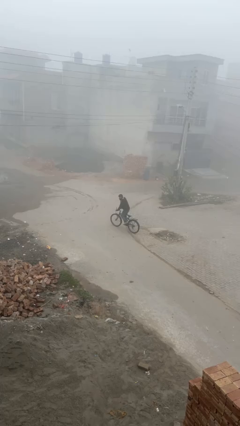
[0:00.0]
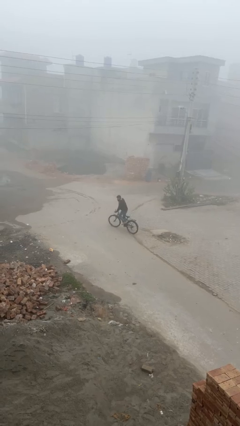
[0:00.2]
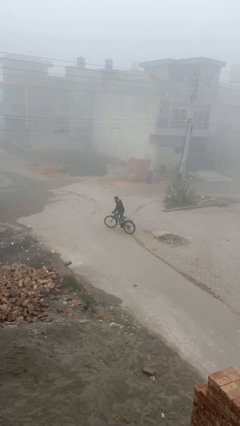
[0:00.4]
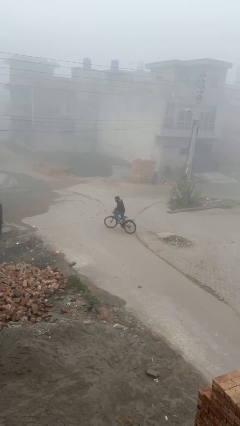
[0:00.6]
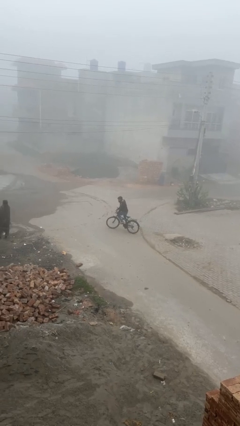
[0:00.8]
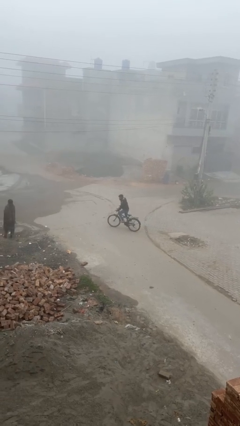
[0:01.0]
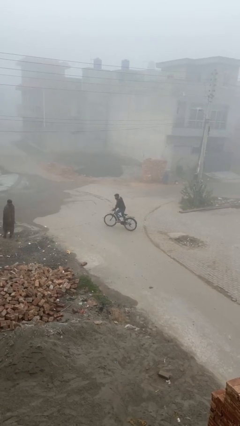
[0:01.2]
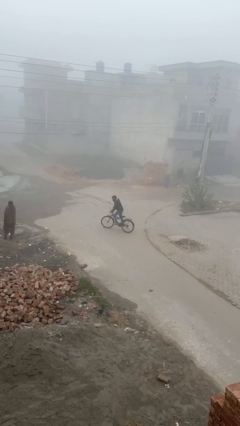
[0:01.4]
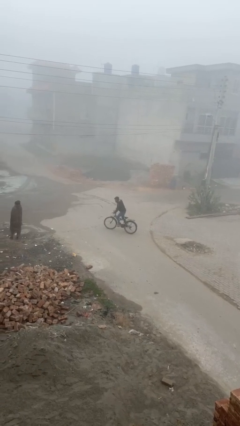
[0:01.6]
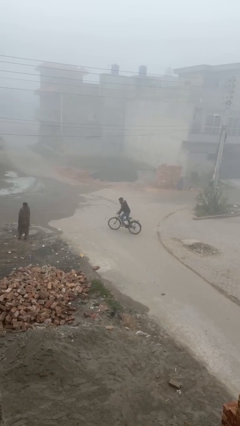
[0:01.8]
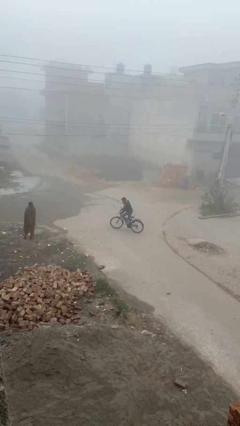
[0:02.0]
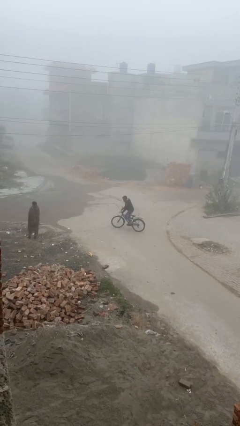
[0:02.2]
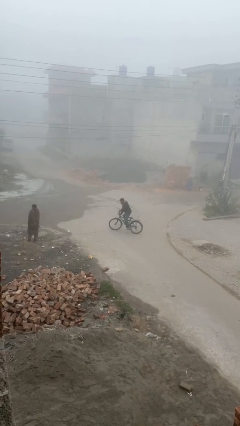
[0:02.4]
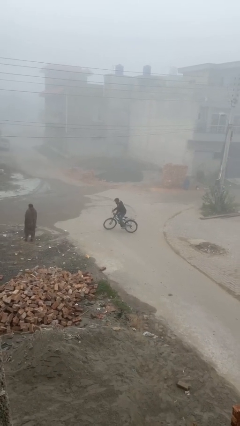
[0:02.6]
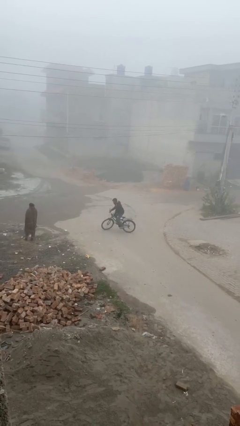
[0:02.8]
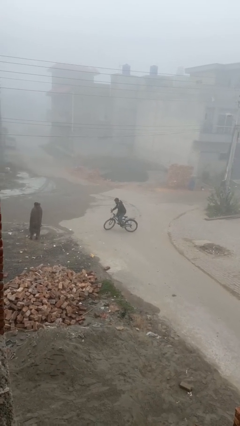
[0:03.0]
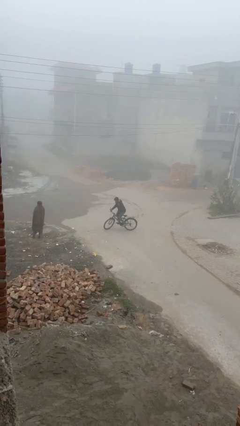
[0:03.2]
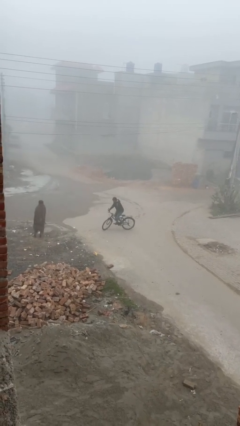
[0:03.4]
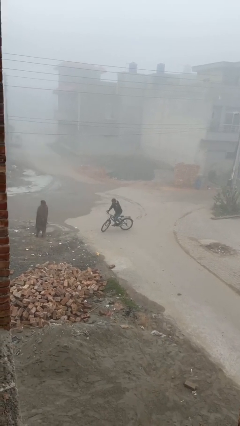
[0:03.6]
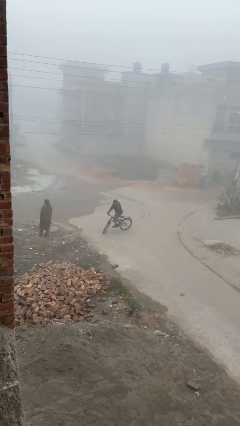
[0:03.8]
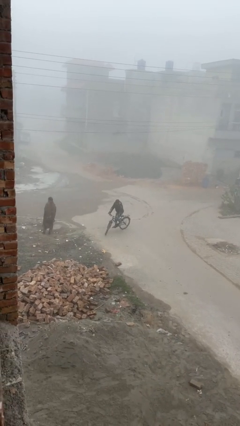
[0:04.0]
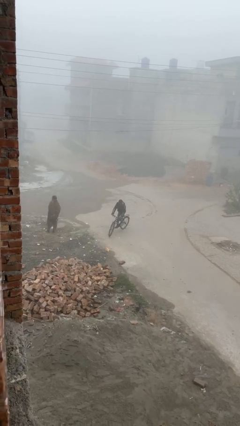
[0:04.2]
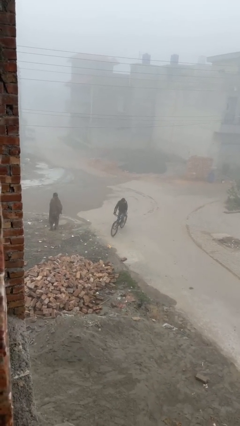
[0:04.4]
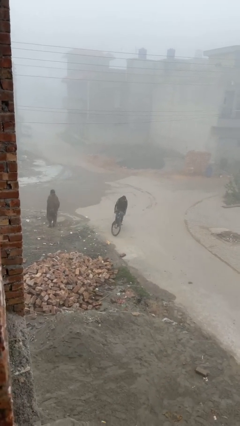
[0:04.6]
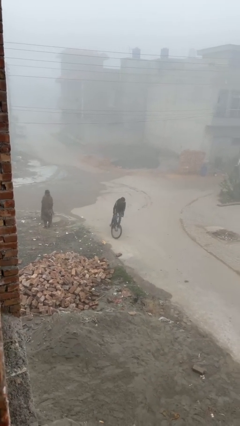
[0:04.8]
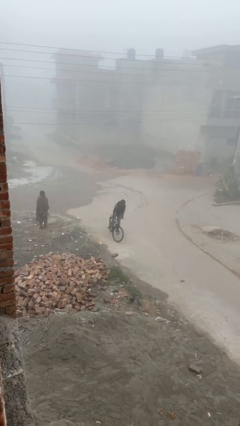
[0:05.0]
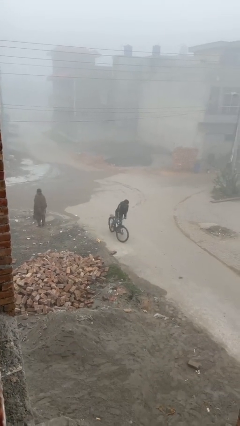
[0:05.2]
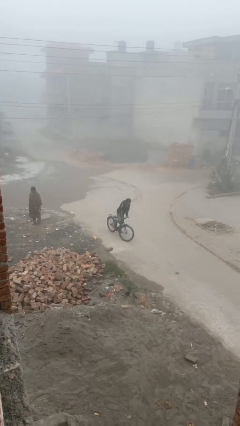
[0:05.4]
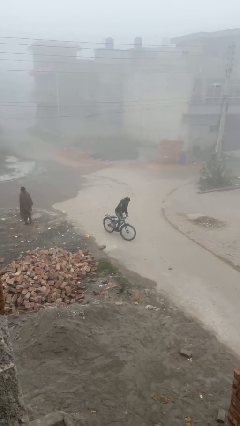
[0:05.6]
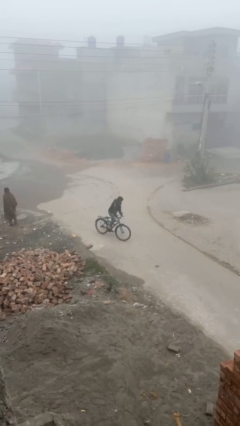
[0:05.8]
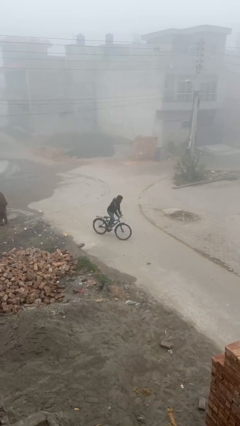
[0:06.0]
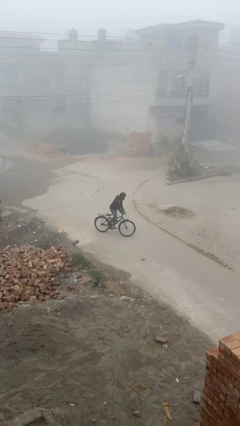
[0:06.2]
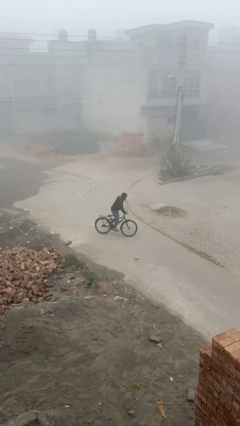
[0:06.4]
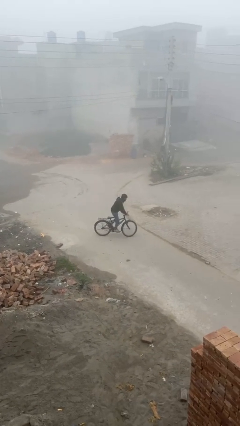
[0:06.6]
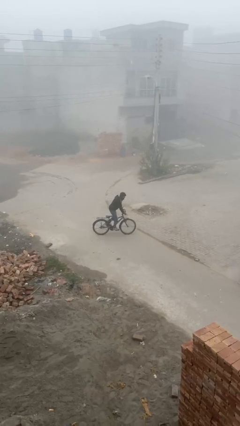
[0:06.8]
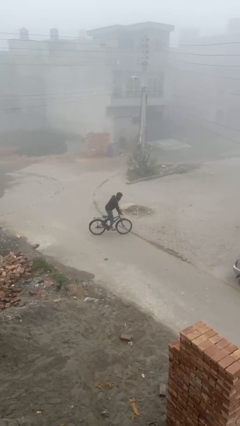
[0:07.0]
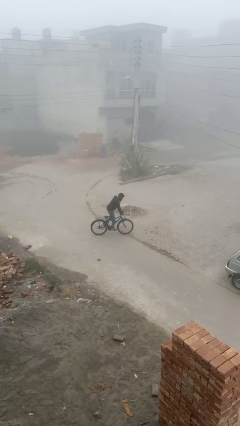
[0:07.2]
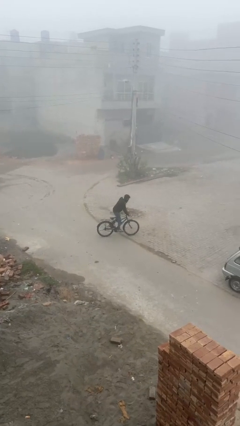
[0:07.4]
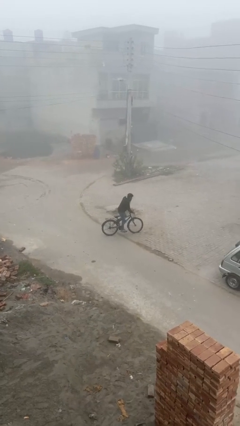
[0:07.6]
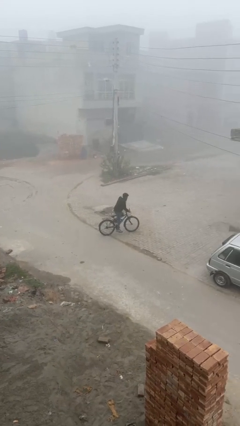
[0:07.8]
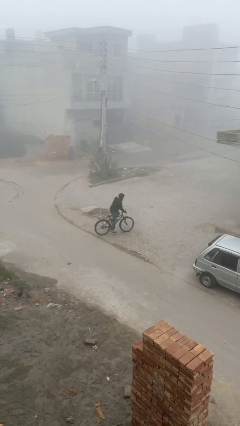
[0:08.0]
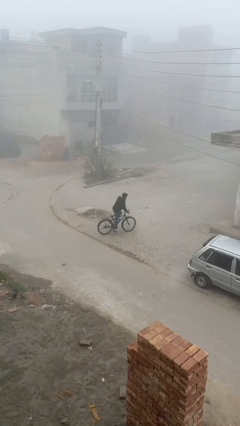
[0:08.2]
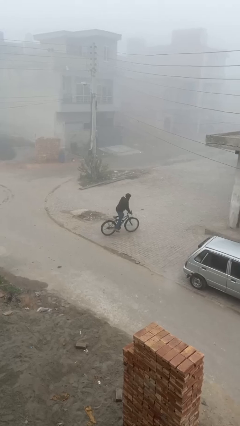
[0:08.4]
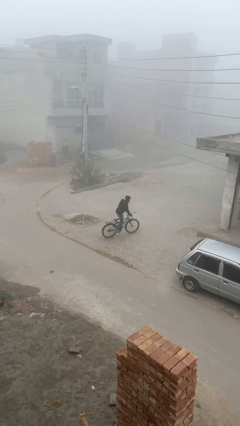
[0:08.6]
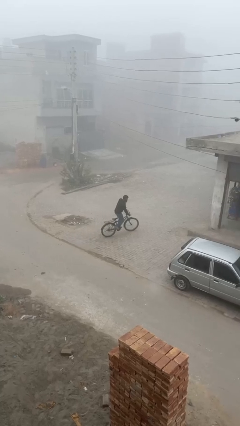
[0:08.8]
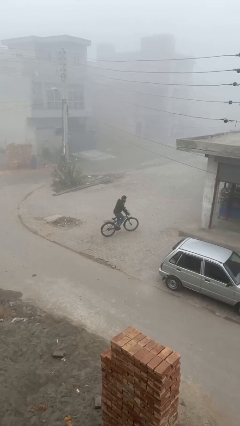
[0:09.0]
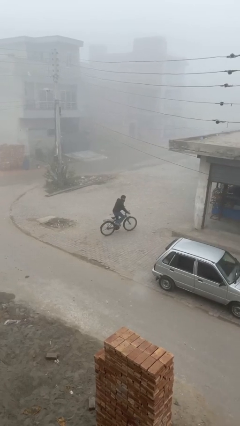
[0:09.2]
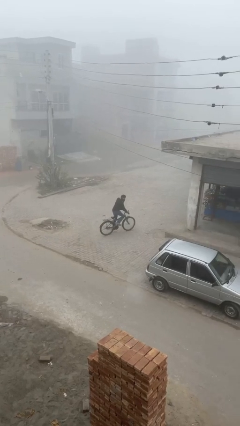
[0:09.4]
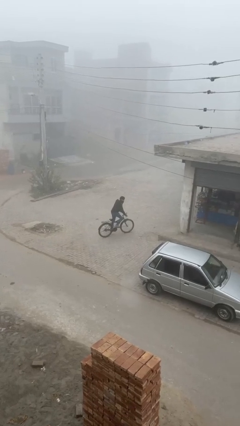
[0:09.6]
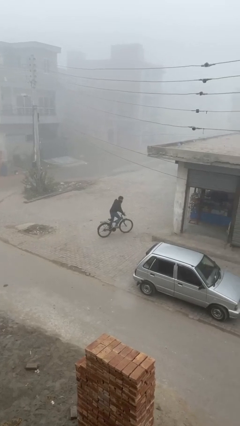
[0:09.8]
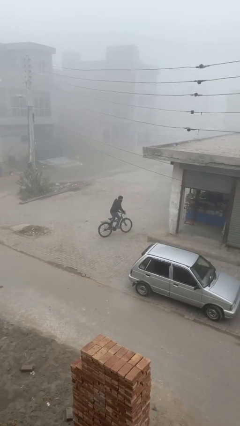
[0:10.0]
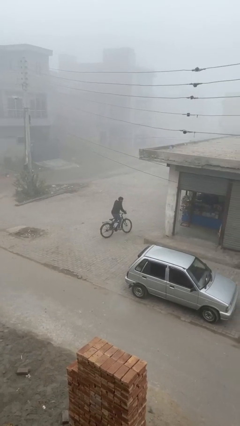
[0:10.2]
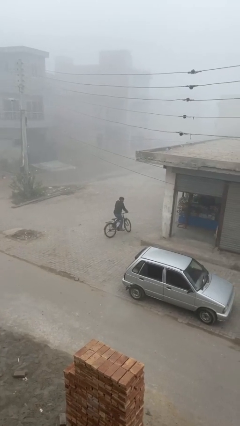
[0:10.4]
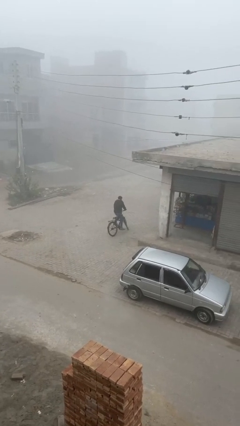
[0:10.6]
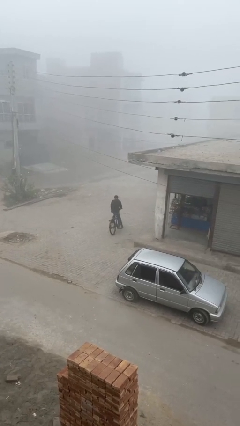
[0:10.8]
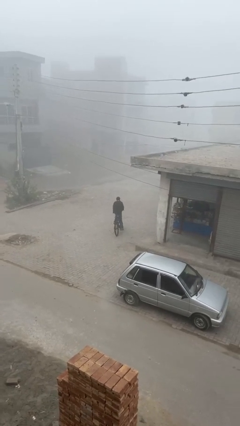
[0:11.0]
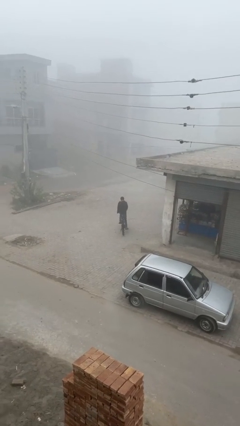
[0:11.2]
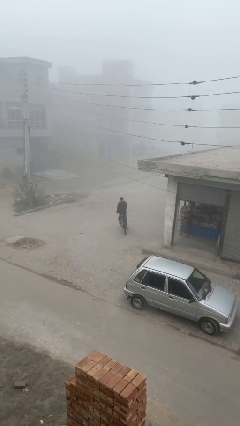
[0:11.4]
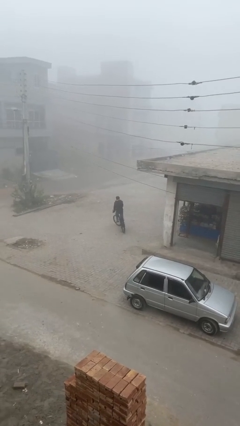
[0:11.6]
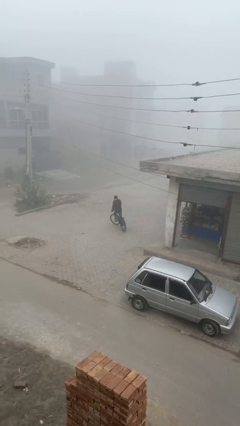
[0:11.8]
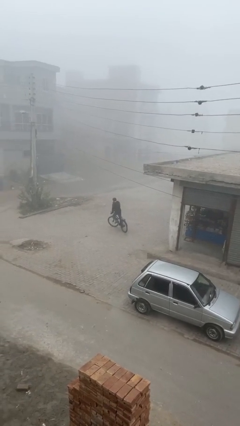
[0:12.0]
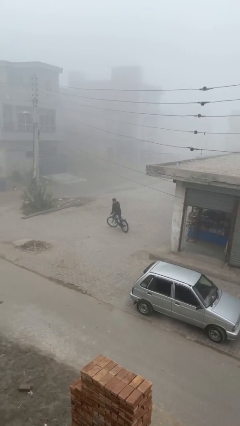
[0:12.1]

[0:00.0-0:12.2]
person rides bicycle

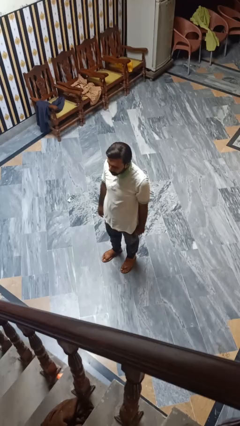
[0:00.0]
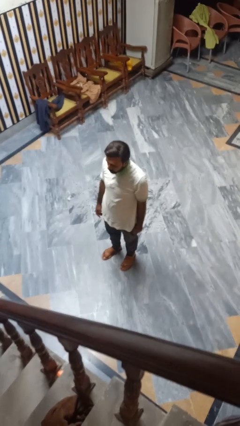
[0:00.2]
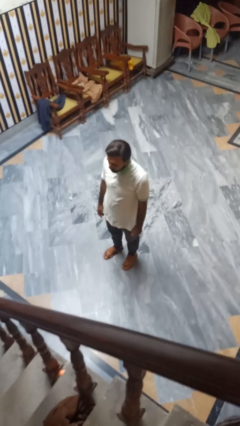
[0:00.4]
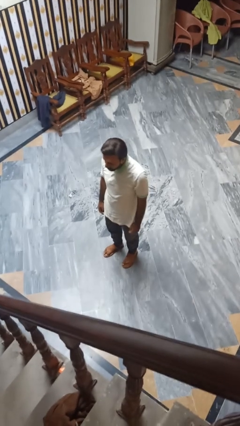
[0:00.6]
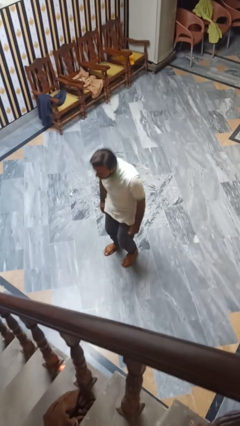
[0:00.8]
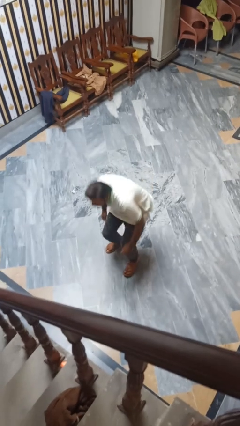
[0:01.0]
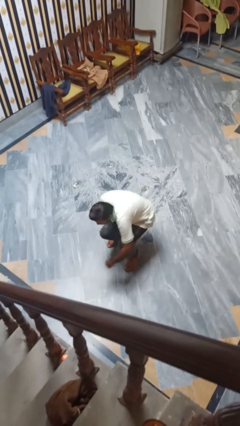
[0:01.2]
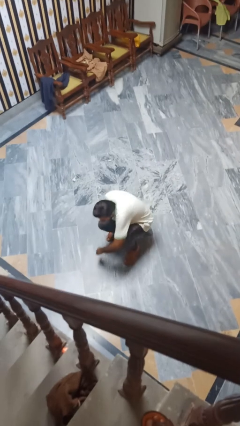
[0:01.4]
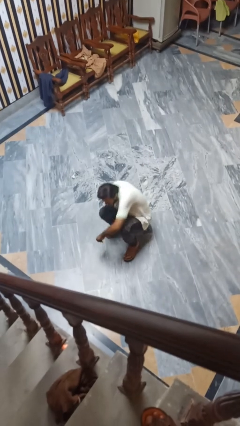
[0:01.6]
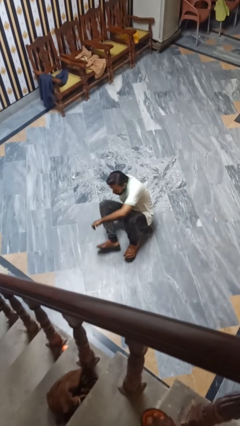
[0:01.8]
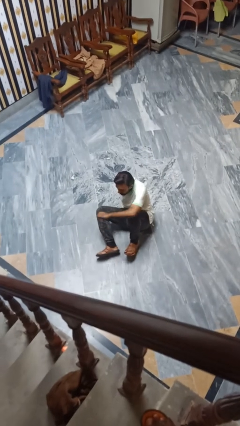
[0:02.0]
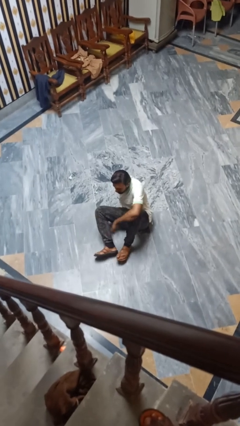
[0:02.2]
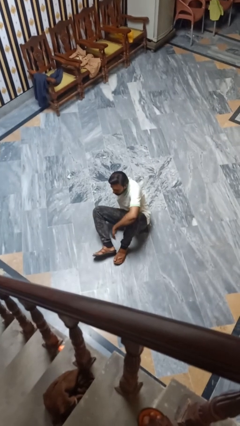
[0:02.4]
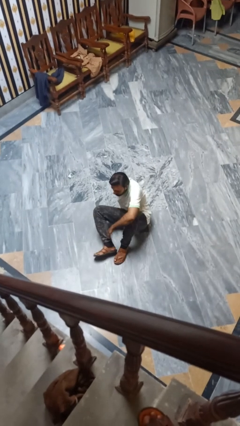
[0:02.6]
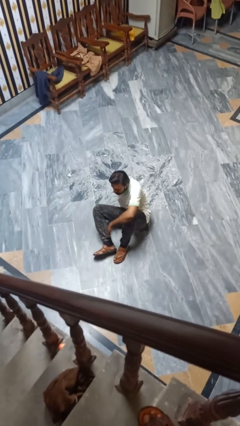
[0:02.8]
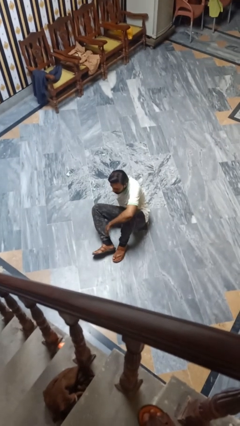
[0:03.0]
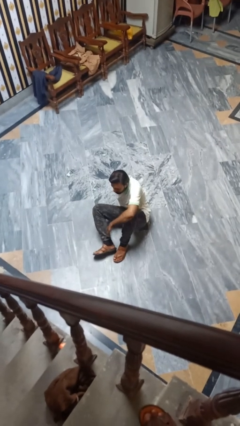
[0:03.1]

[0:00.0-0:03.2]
person falls while standing

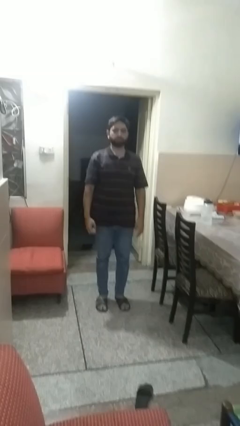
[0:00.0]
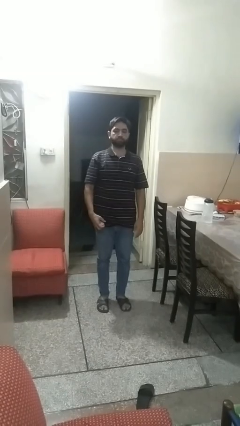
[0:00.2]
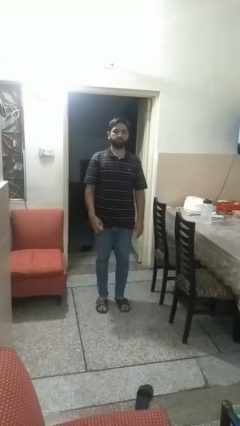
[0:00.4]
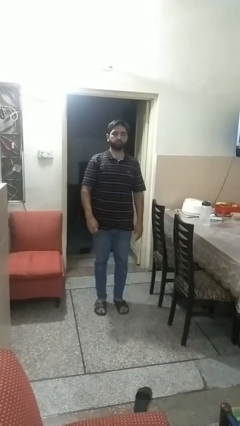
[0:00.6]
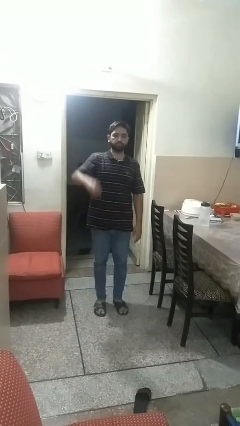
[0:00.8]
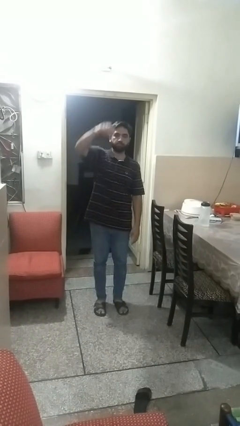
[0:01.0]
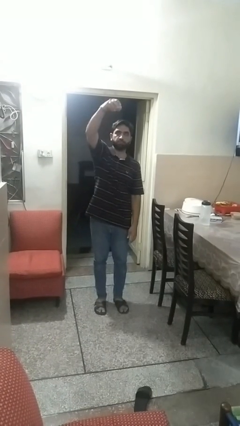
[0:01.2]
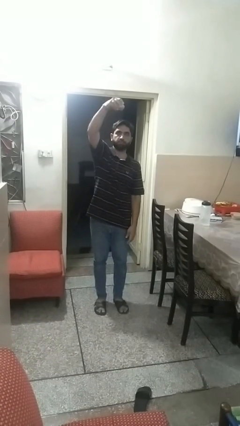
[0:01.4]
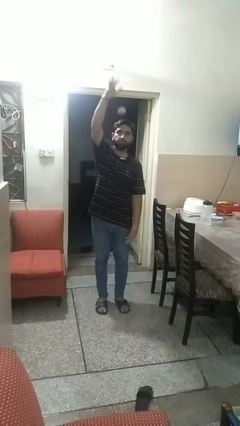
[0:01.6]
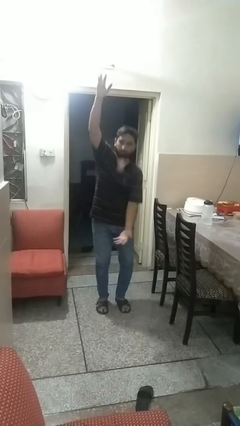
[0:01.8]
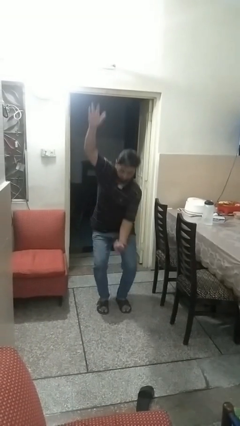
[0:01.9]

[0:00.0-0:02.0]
person drops object

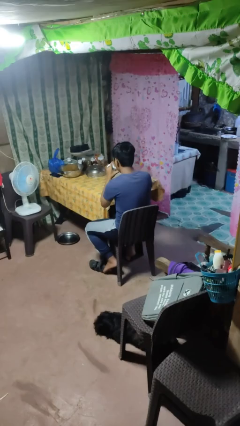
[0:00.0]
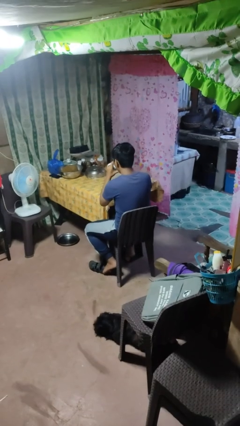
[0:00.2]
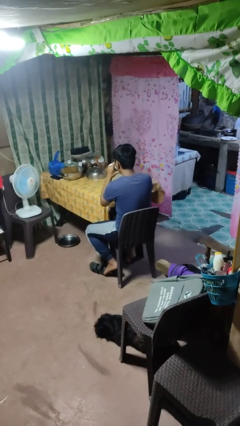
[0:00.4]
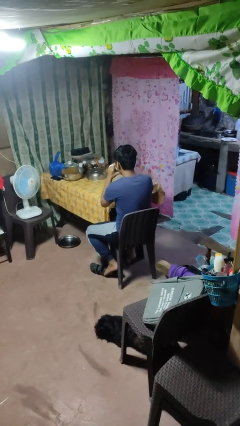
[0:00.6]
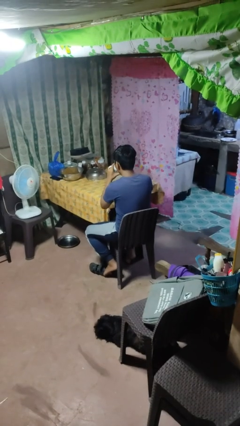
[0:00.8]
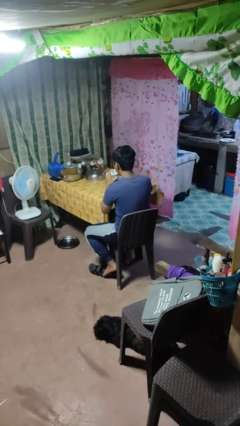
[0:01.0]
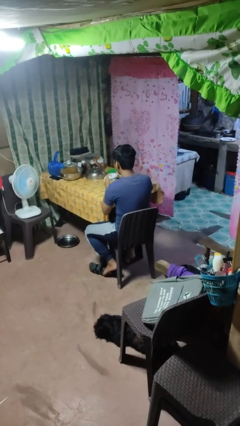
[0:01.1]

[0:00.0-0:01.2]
person drinks from mug
